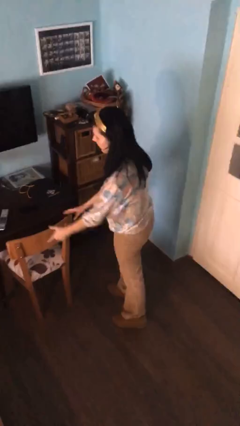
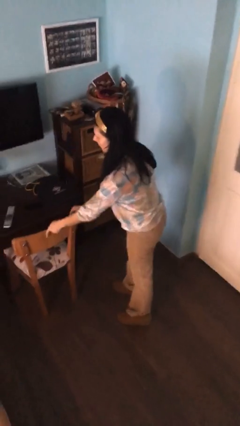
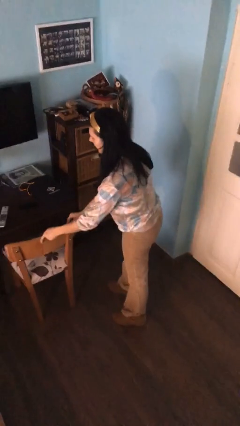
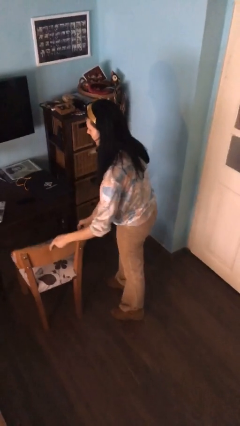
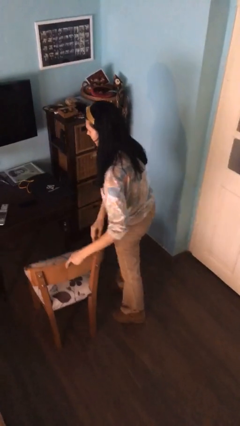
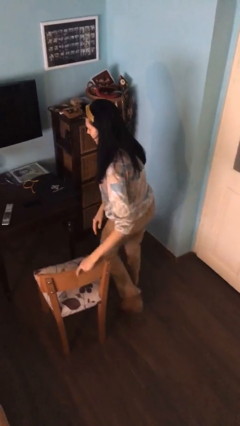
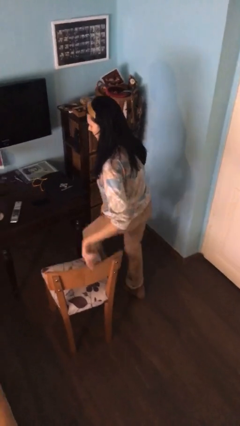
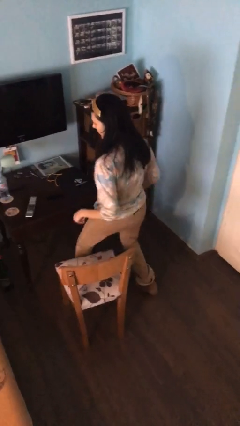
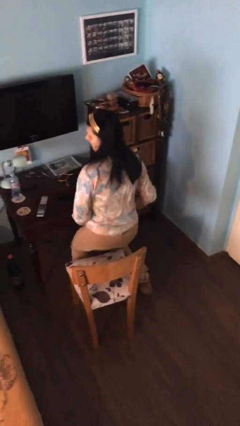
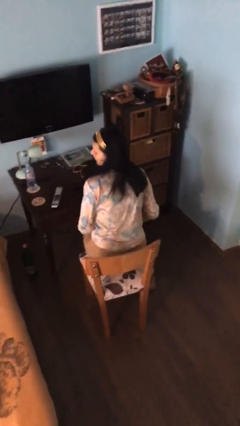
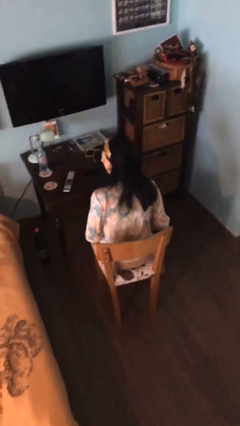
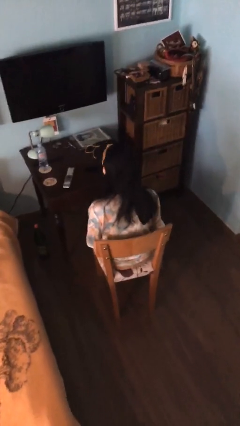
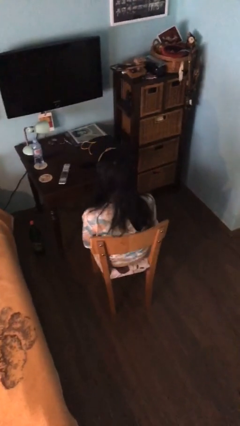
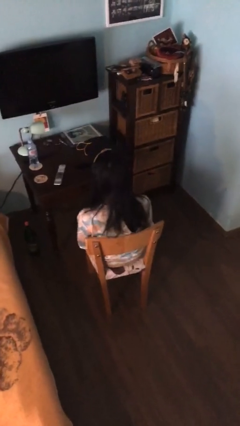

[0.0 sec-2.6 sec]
person sits down

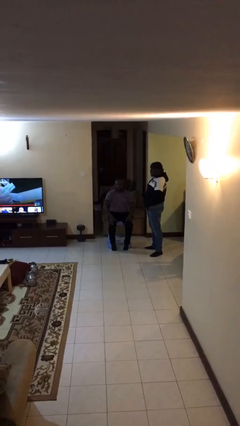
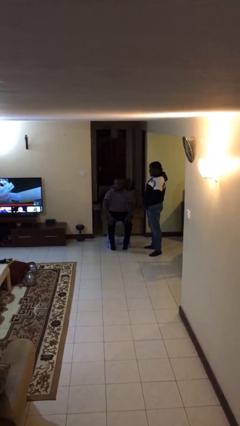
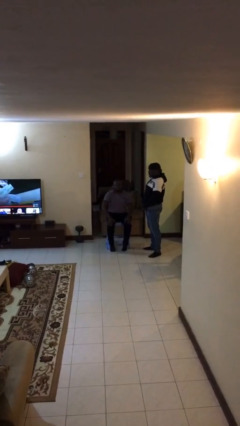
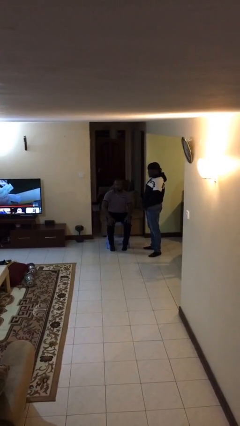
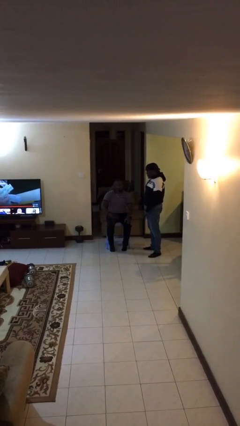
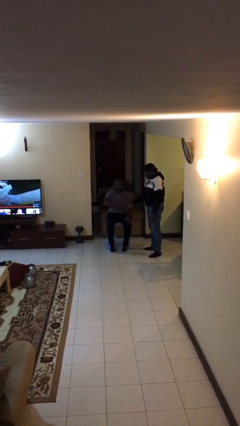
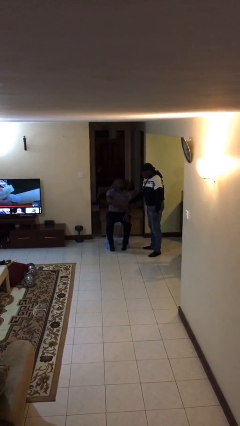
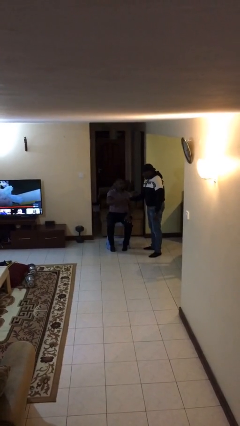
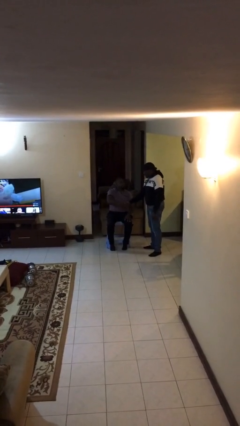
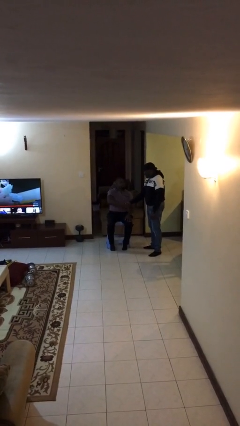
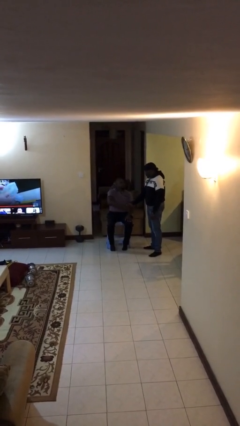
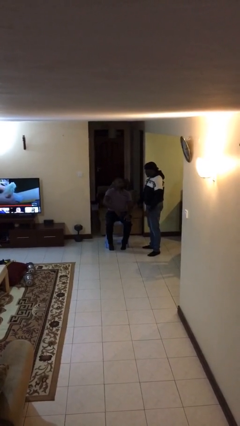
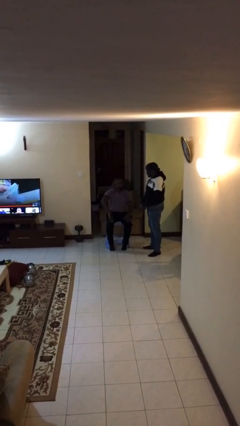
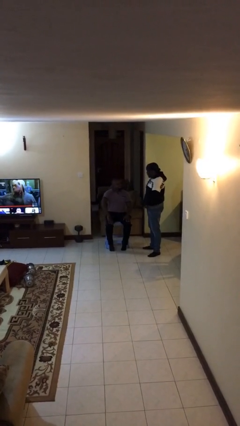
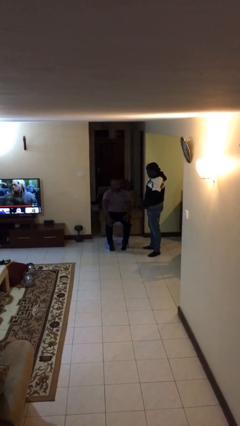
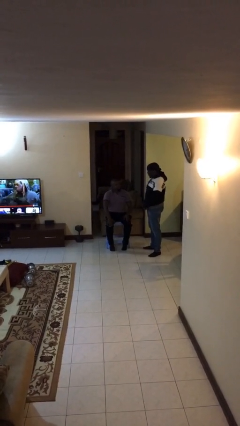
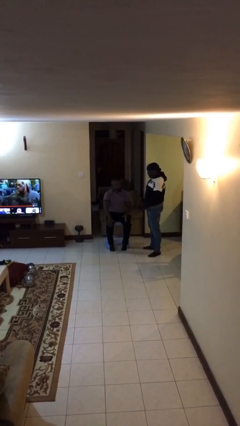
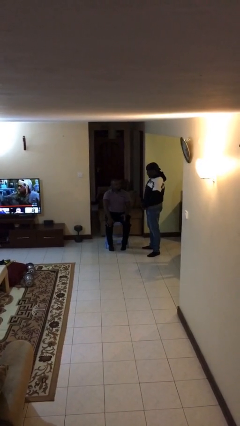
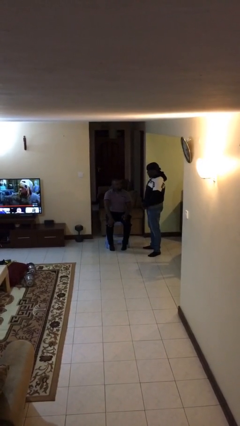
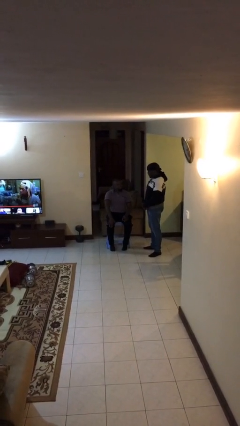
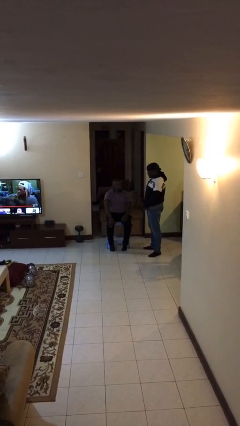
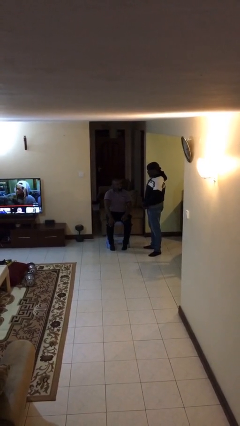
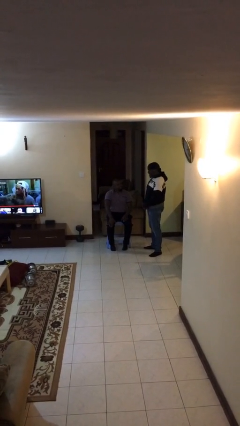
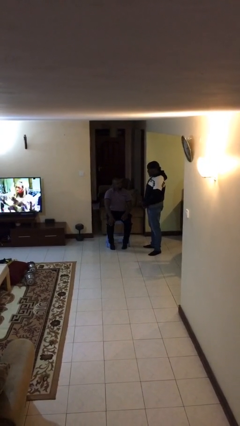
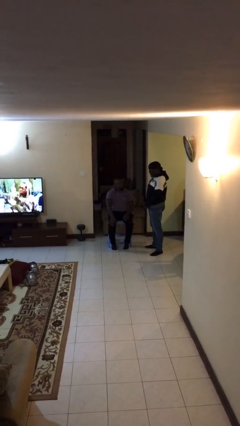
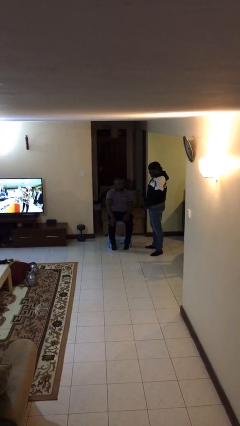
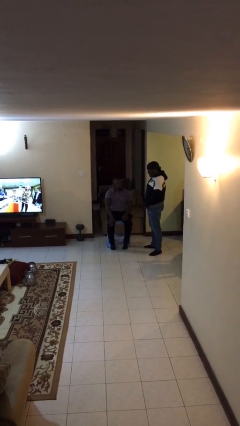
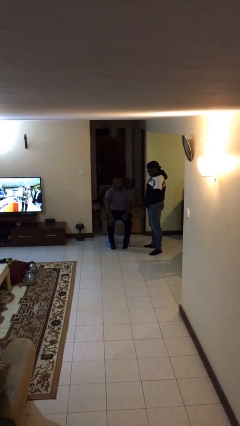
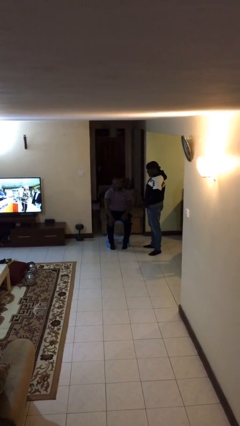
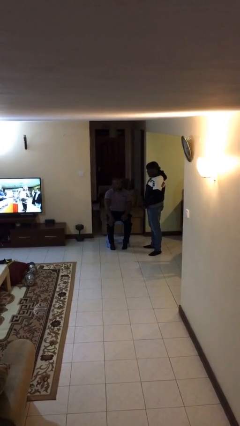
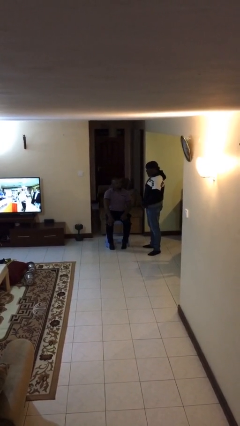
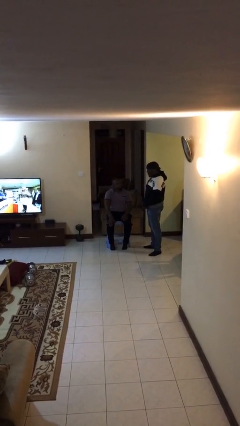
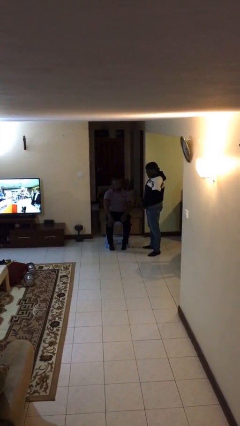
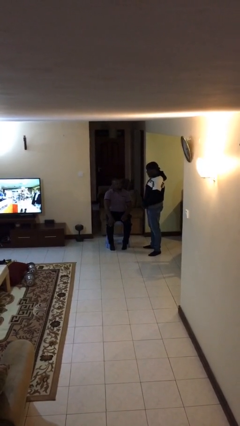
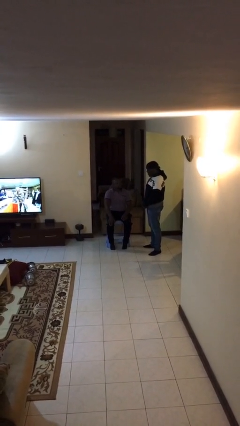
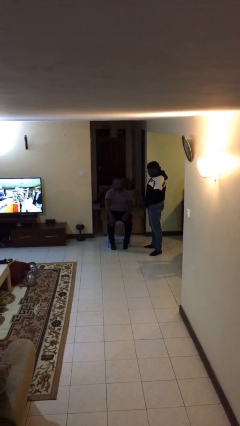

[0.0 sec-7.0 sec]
person shakes hand

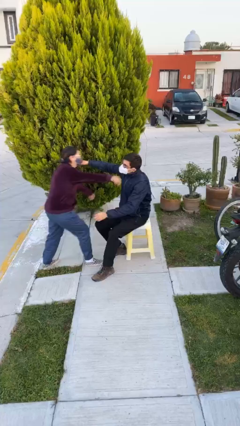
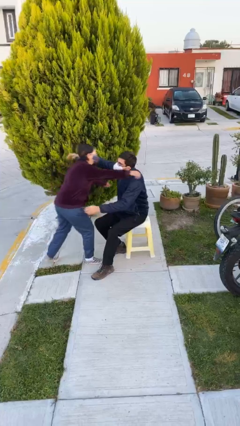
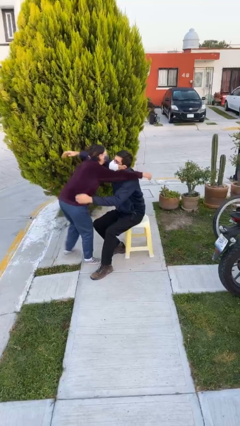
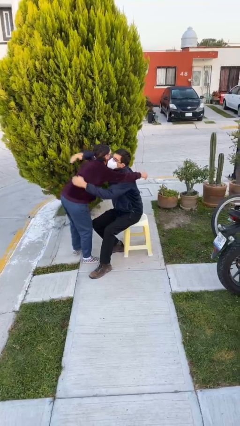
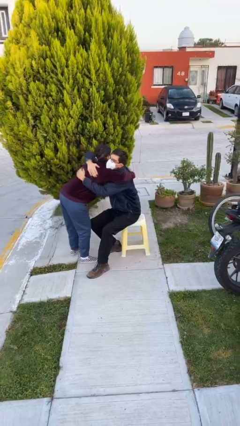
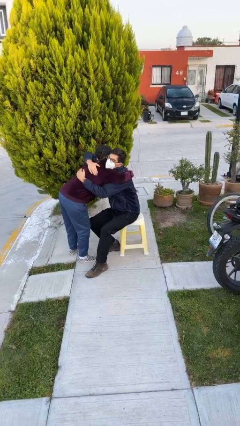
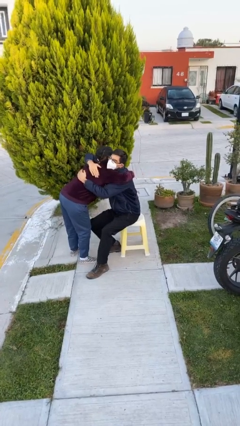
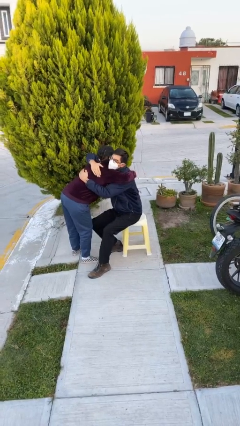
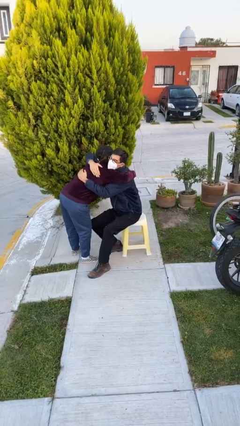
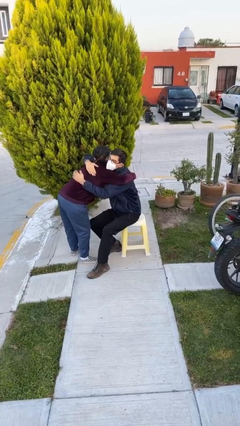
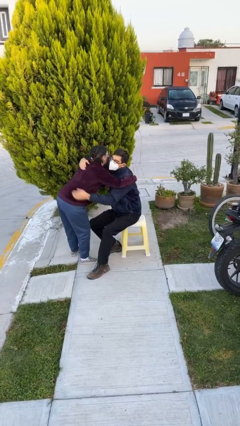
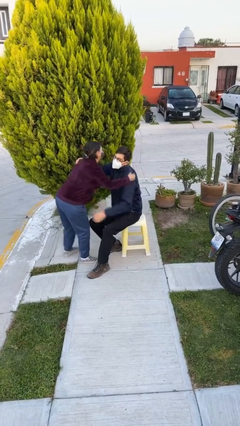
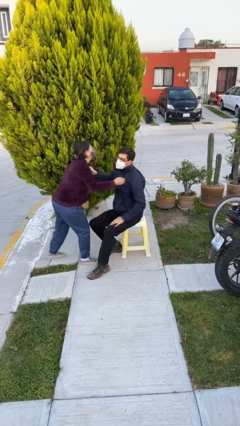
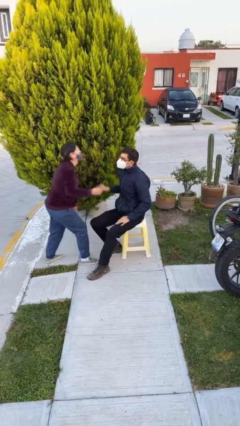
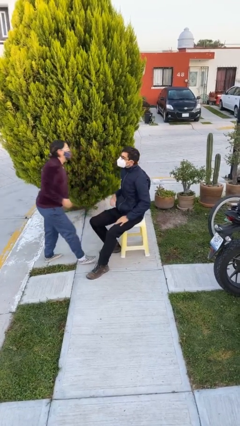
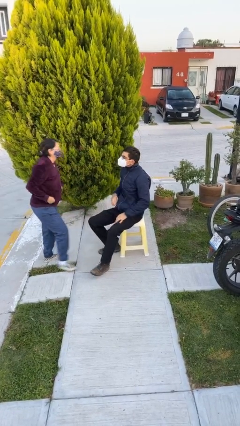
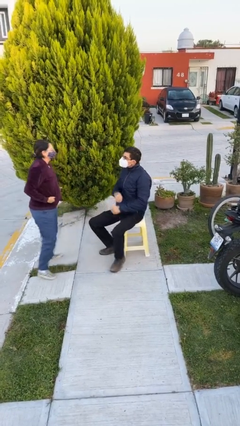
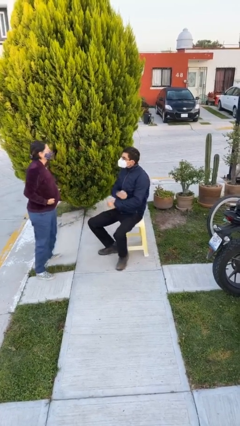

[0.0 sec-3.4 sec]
person embraces person

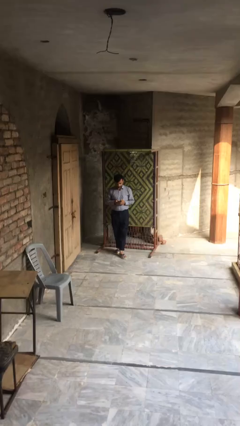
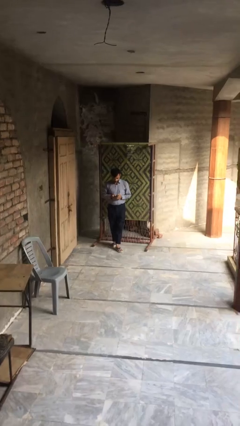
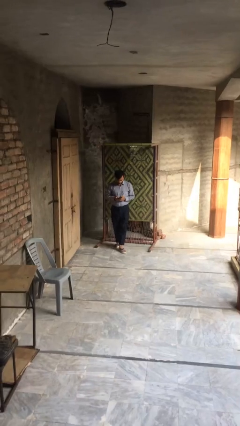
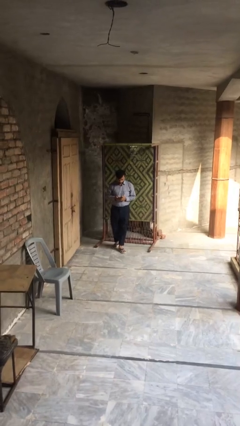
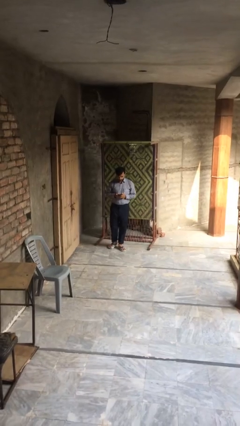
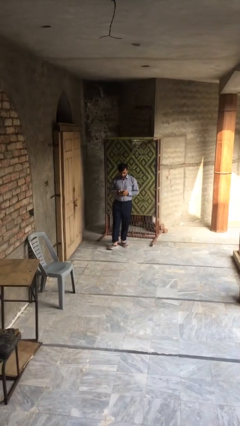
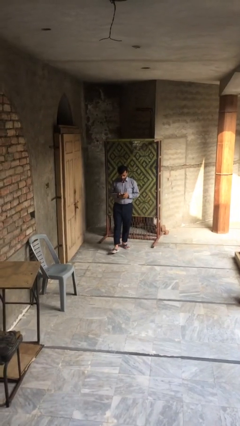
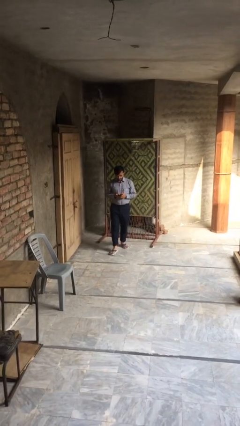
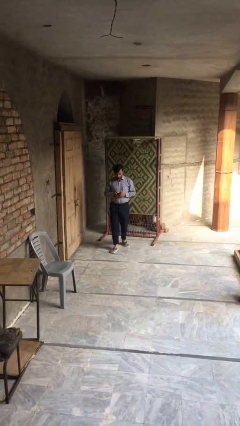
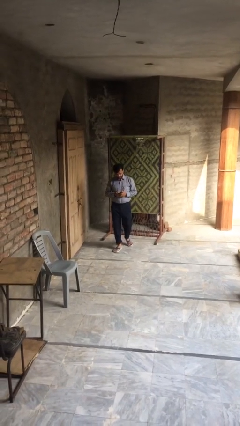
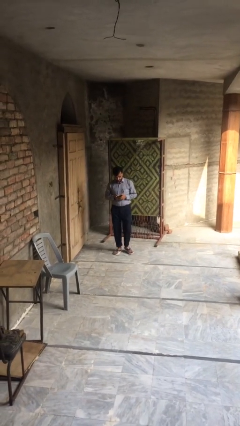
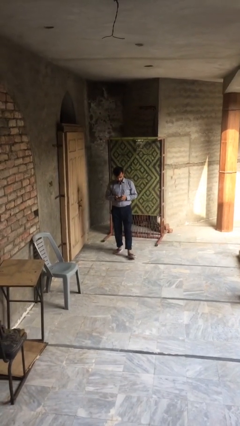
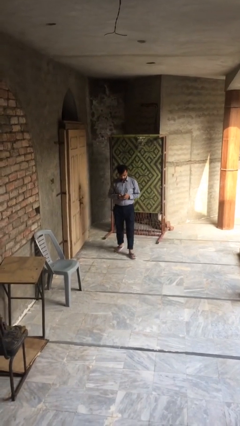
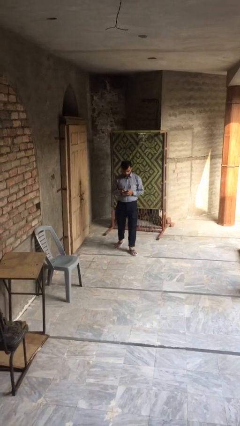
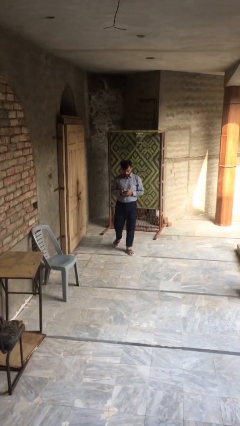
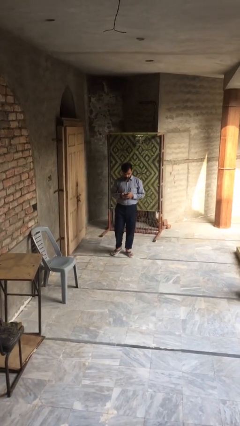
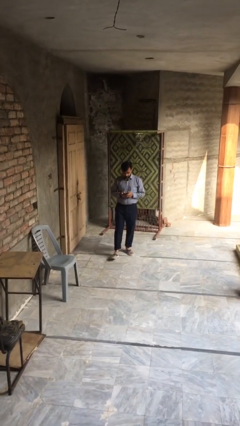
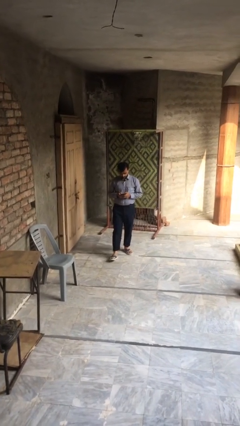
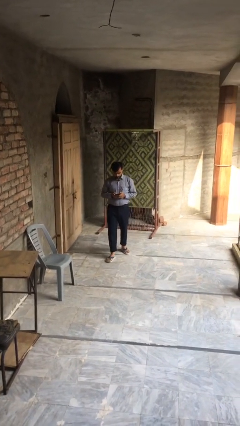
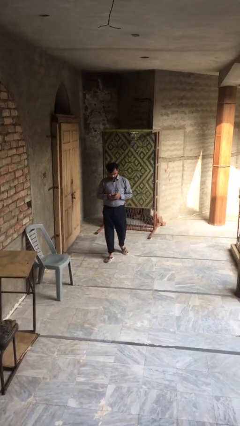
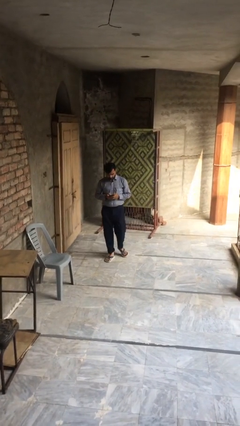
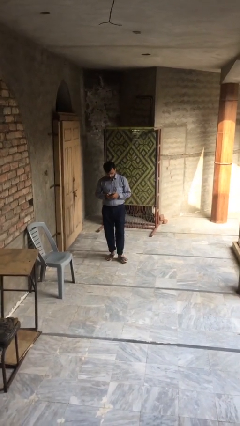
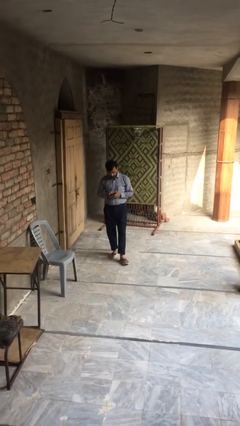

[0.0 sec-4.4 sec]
person texts on phone

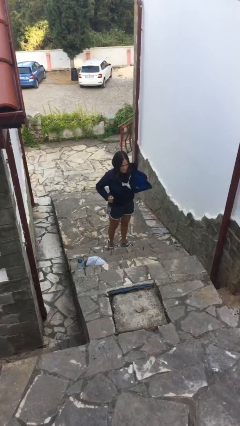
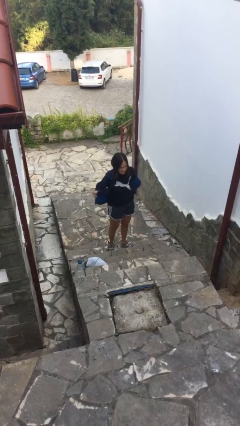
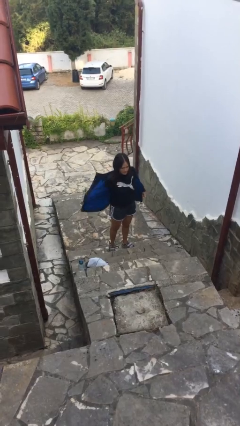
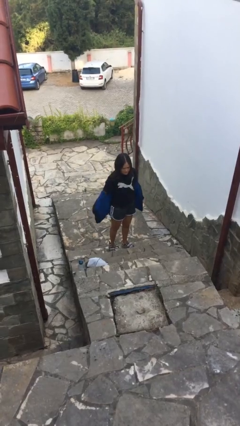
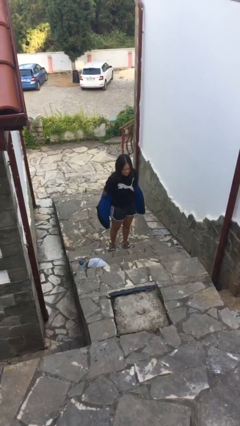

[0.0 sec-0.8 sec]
person unzips jacket
